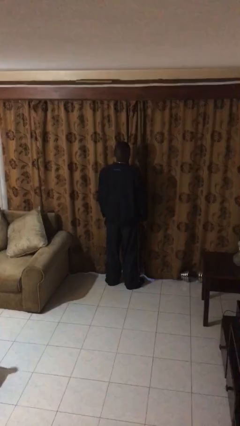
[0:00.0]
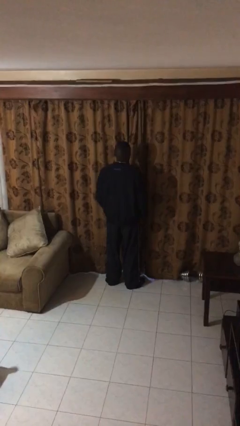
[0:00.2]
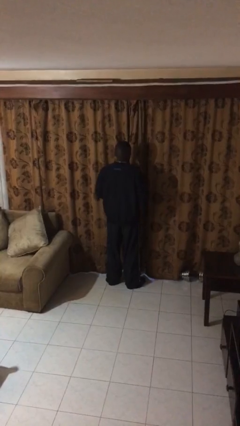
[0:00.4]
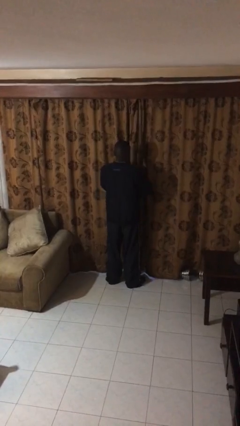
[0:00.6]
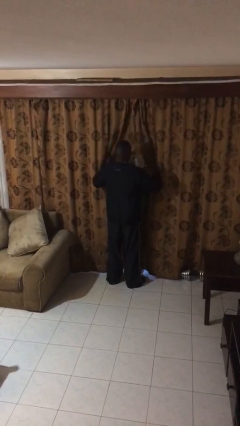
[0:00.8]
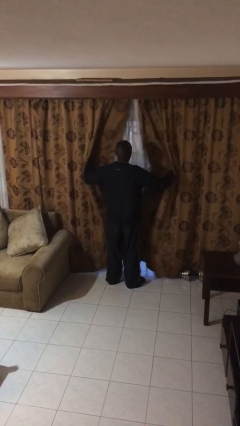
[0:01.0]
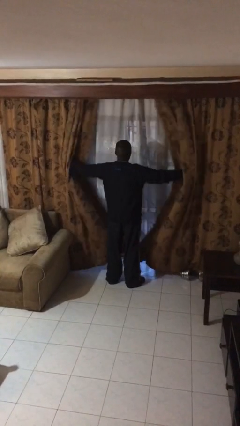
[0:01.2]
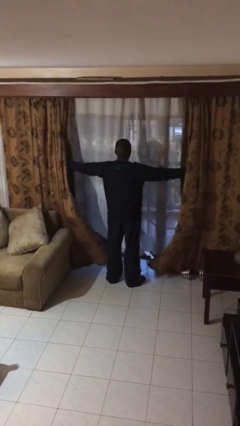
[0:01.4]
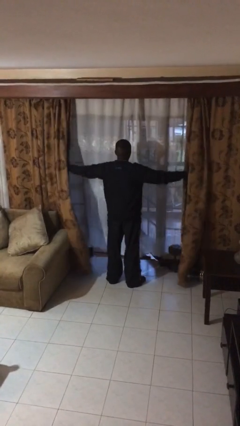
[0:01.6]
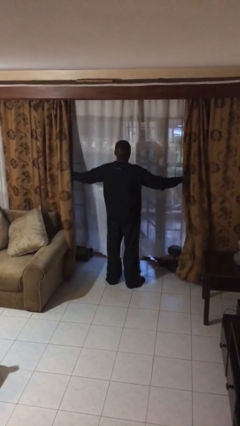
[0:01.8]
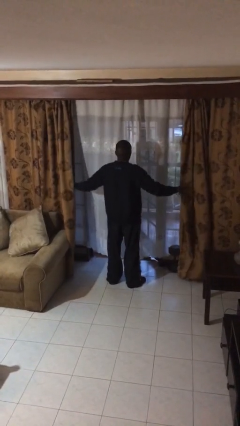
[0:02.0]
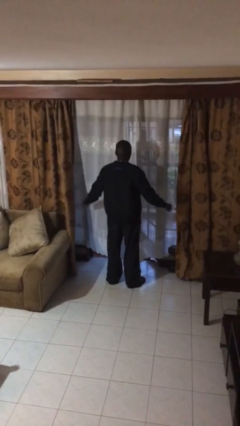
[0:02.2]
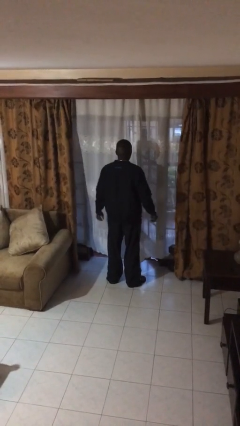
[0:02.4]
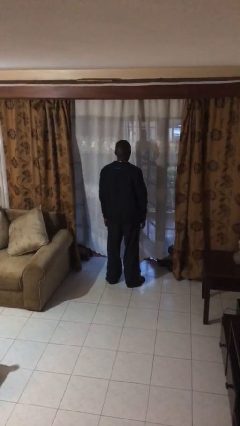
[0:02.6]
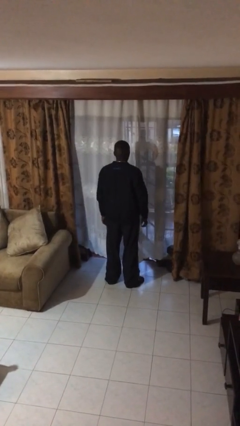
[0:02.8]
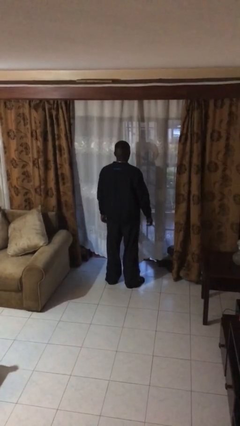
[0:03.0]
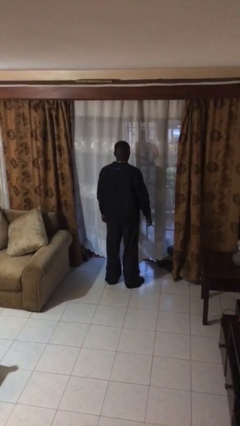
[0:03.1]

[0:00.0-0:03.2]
person opens curtains

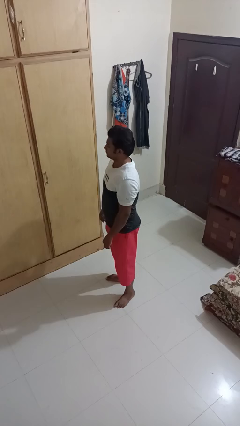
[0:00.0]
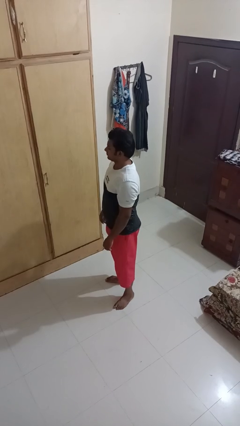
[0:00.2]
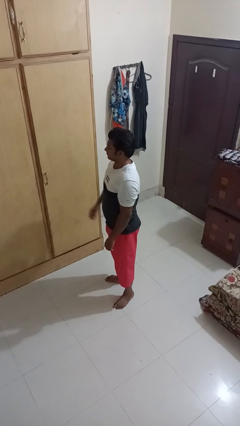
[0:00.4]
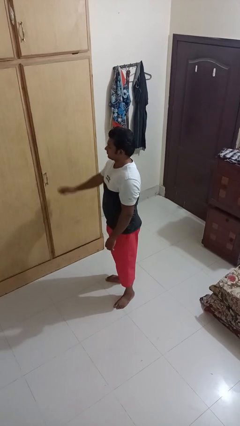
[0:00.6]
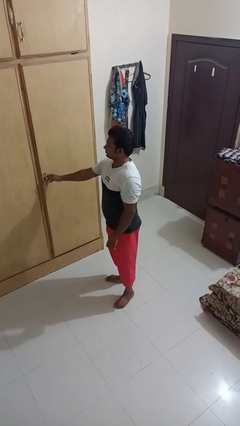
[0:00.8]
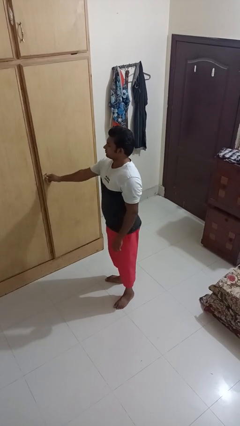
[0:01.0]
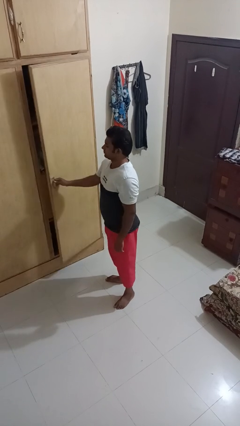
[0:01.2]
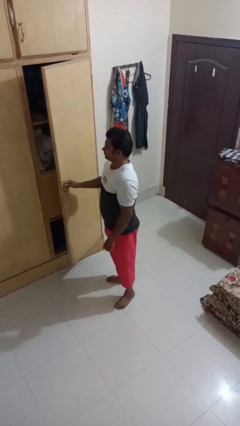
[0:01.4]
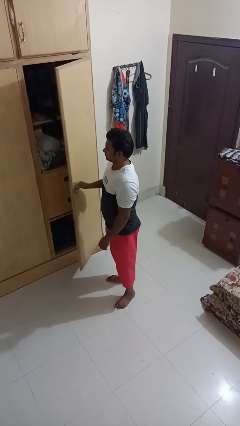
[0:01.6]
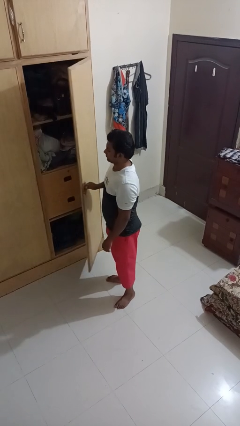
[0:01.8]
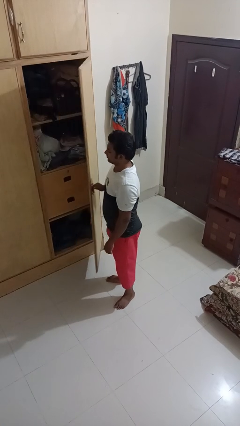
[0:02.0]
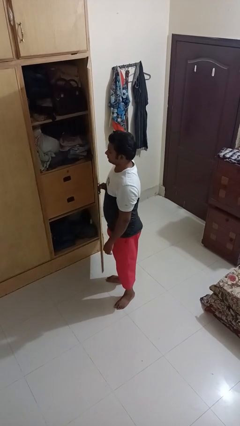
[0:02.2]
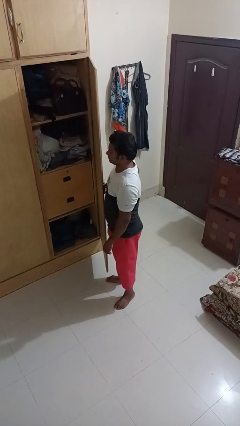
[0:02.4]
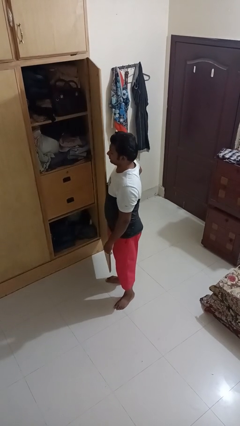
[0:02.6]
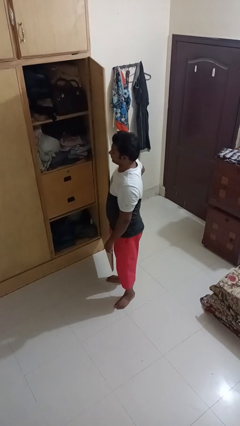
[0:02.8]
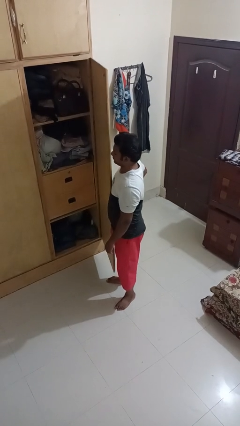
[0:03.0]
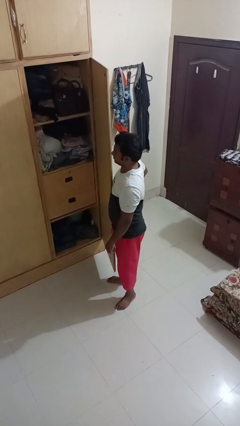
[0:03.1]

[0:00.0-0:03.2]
person opens closet door

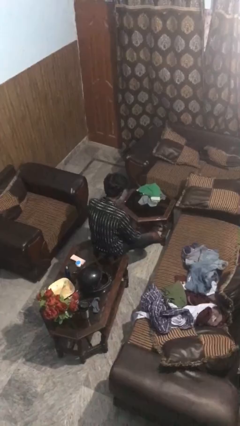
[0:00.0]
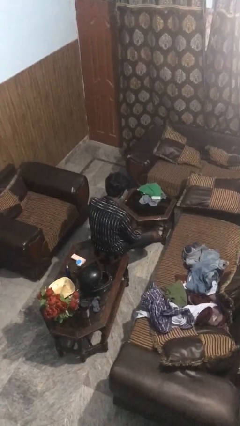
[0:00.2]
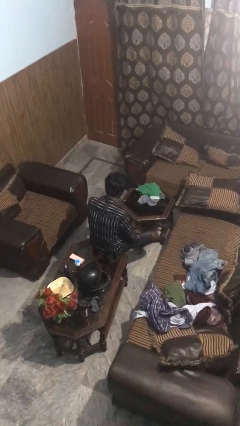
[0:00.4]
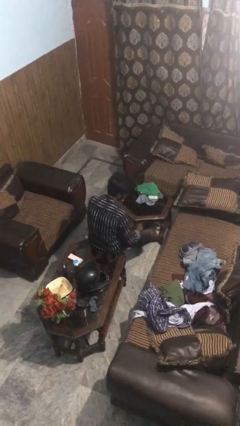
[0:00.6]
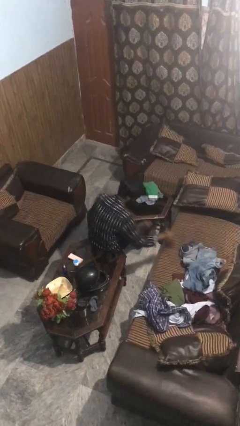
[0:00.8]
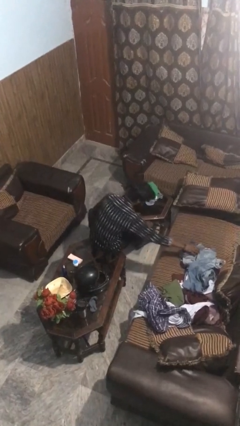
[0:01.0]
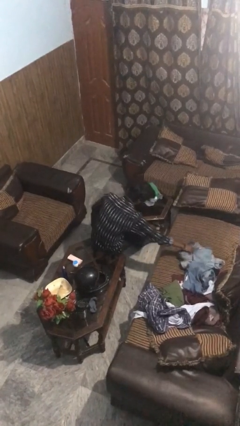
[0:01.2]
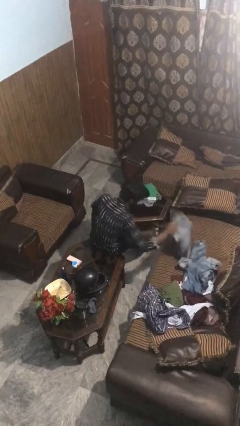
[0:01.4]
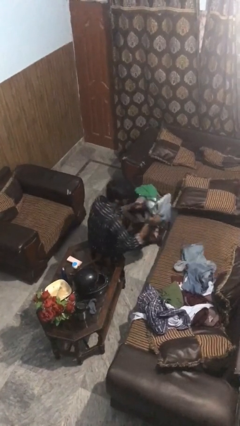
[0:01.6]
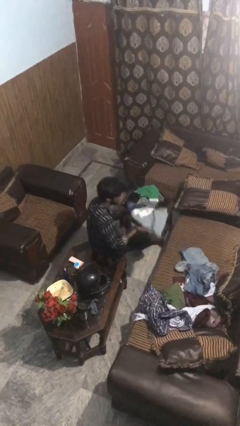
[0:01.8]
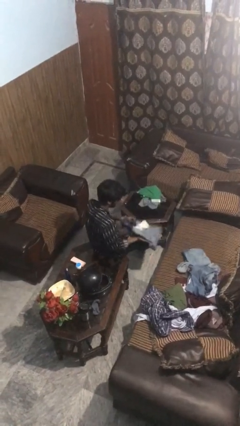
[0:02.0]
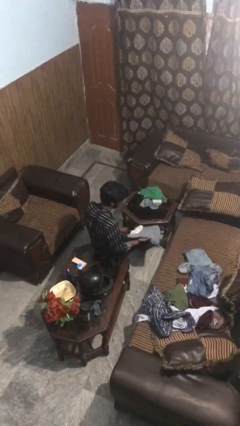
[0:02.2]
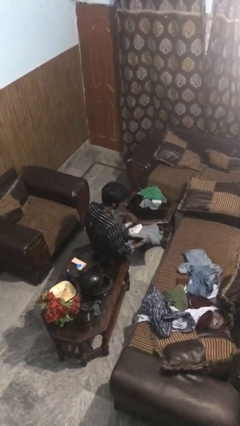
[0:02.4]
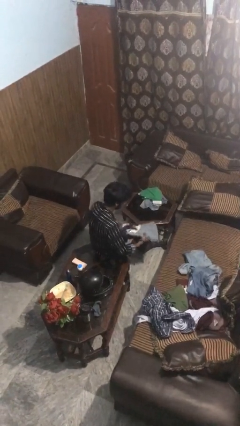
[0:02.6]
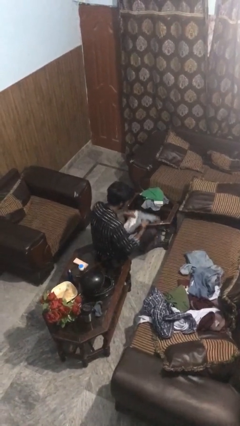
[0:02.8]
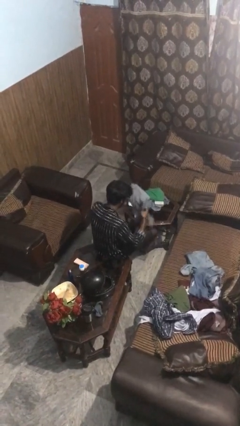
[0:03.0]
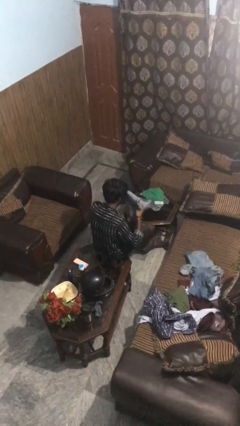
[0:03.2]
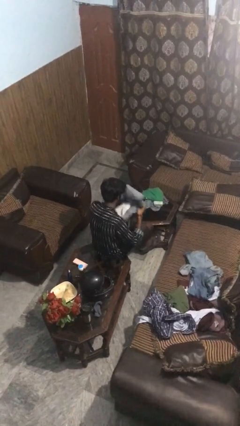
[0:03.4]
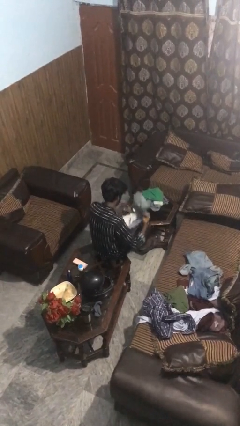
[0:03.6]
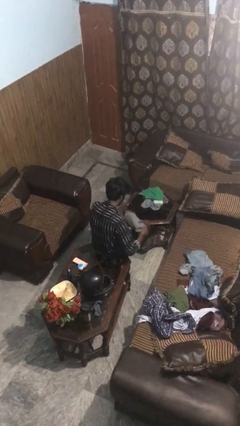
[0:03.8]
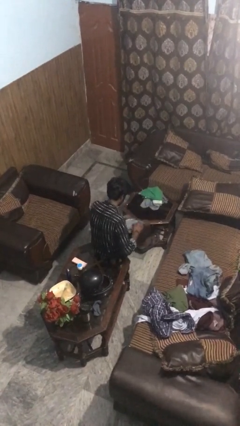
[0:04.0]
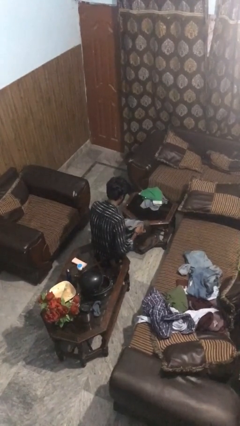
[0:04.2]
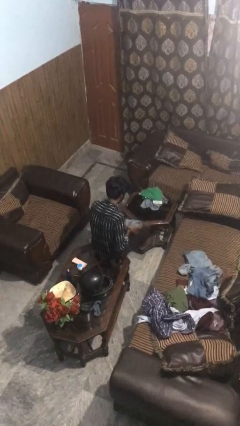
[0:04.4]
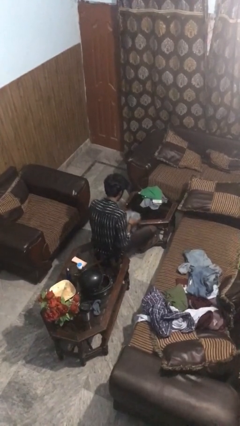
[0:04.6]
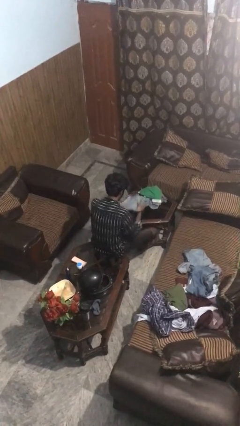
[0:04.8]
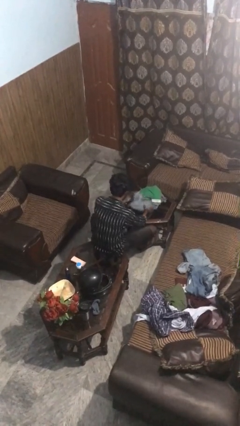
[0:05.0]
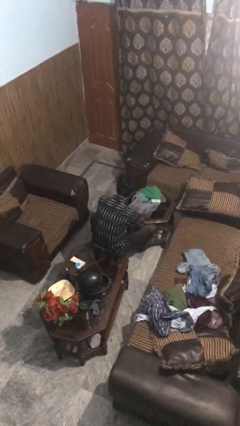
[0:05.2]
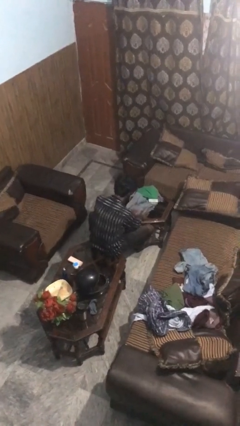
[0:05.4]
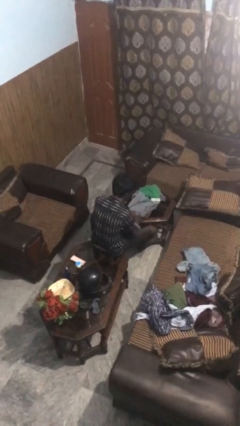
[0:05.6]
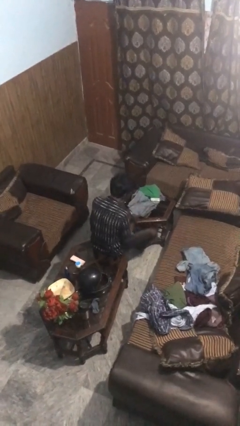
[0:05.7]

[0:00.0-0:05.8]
person folds pants

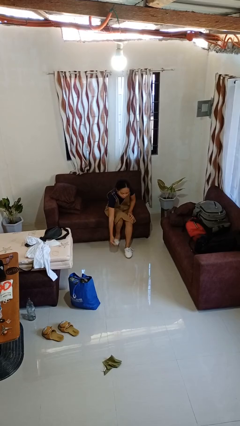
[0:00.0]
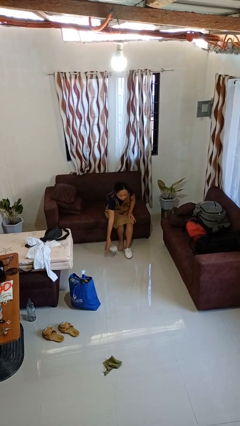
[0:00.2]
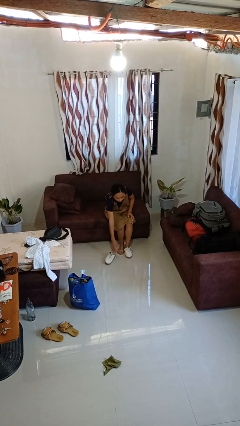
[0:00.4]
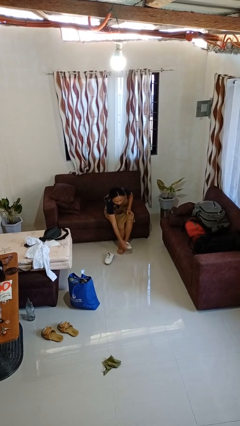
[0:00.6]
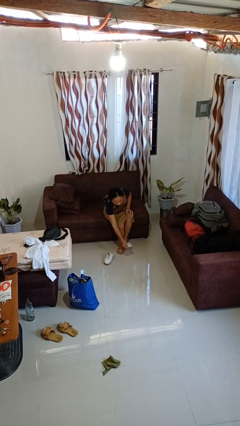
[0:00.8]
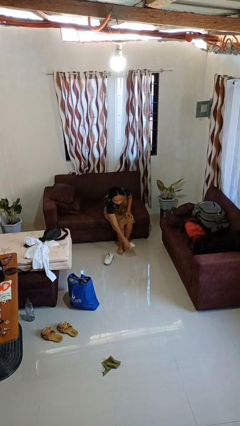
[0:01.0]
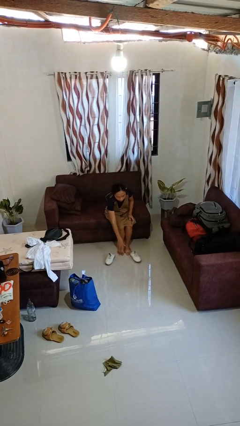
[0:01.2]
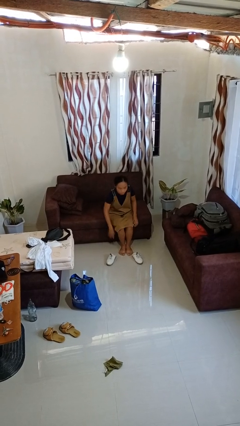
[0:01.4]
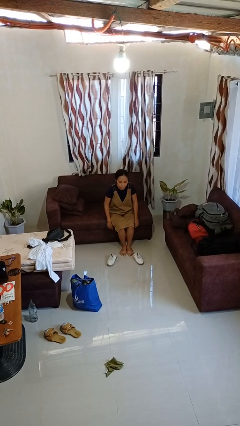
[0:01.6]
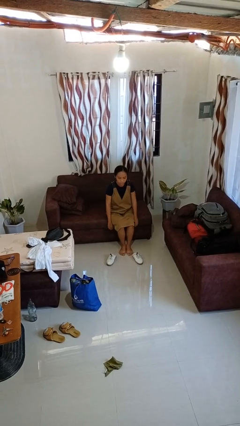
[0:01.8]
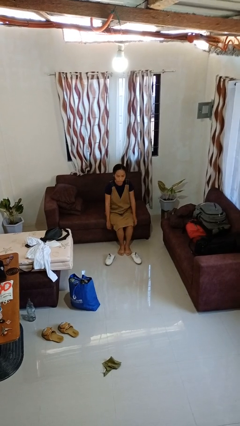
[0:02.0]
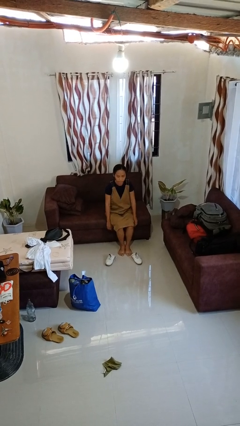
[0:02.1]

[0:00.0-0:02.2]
person takes off shoes

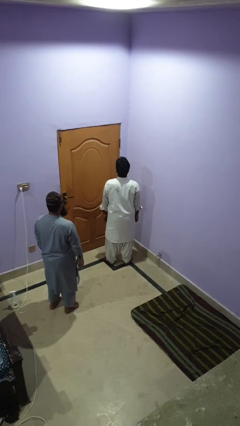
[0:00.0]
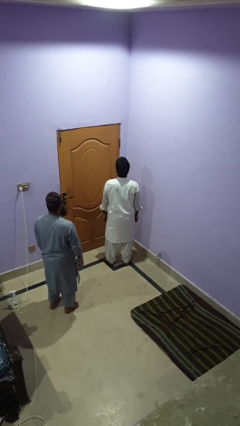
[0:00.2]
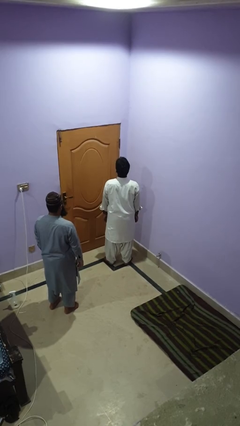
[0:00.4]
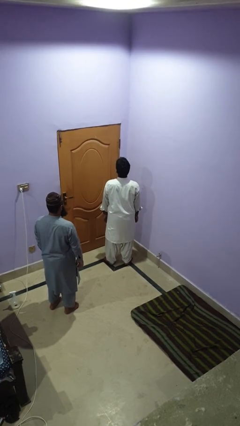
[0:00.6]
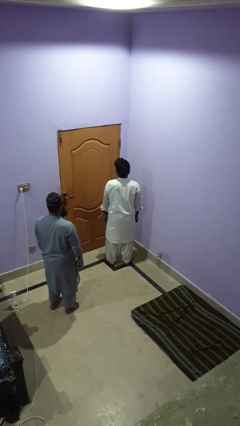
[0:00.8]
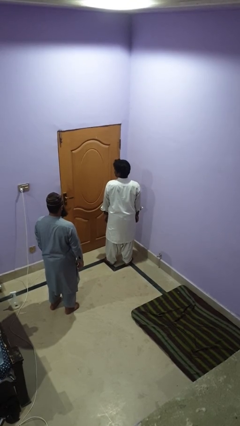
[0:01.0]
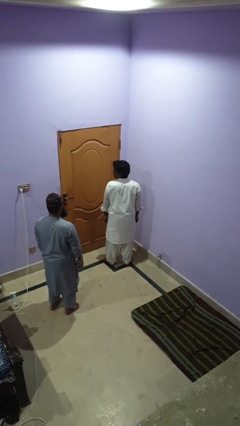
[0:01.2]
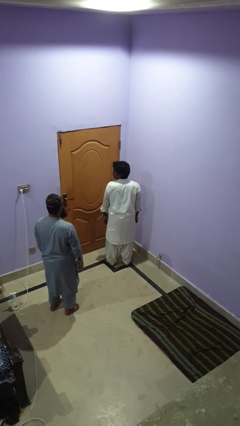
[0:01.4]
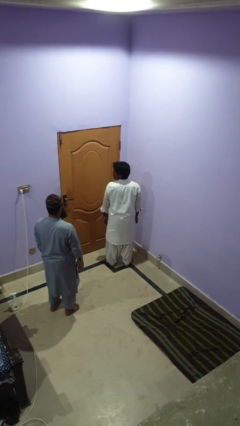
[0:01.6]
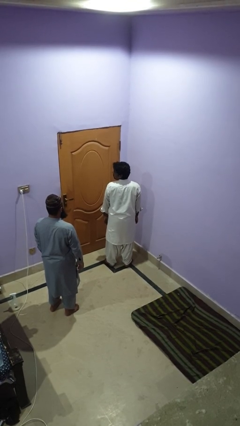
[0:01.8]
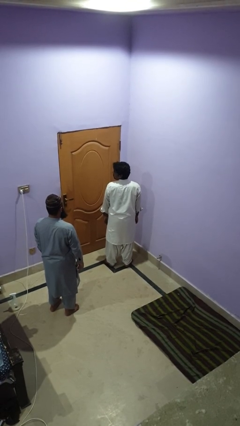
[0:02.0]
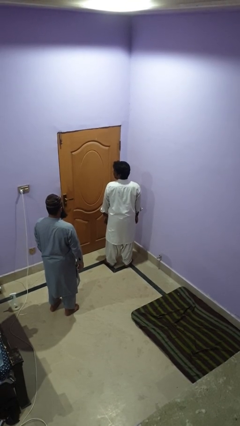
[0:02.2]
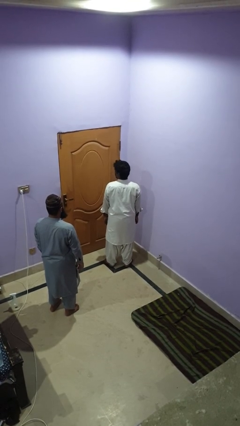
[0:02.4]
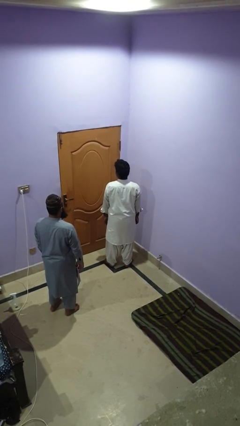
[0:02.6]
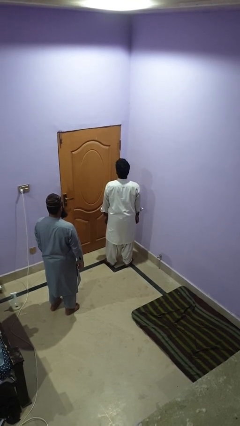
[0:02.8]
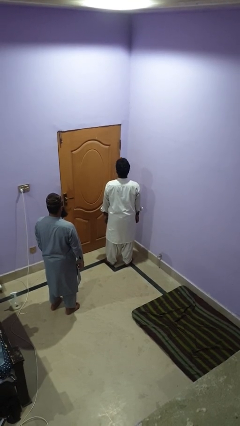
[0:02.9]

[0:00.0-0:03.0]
person looks over shoulder
